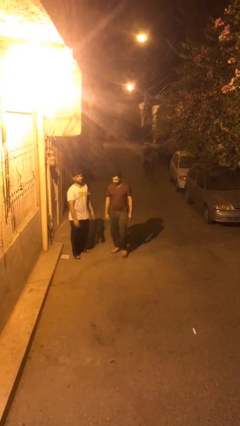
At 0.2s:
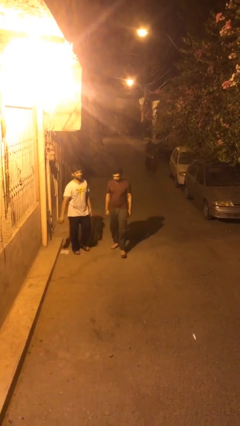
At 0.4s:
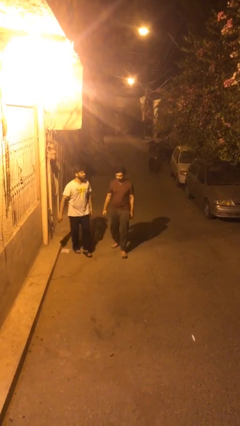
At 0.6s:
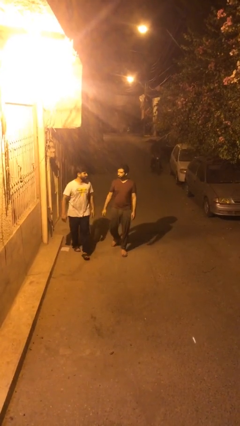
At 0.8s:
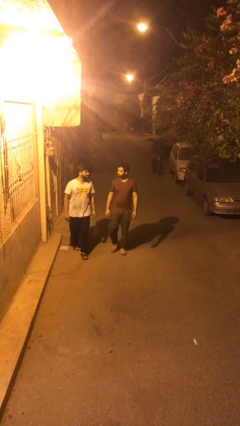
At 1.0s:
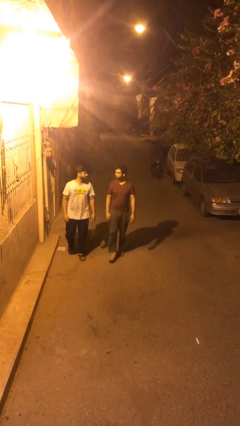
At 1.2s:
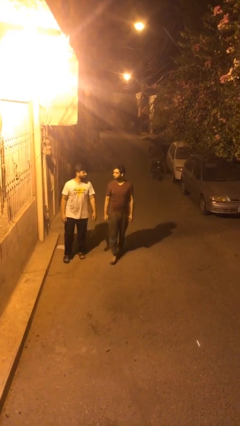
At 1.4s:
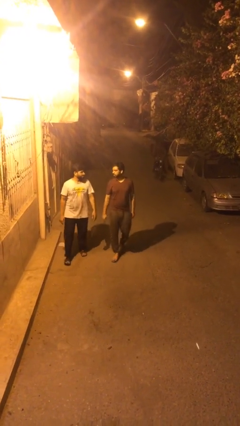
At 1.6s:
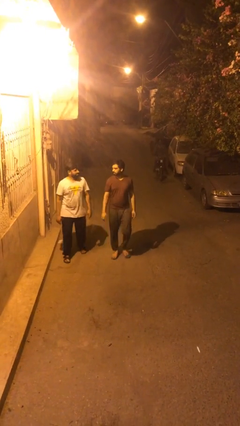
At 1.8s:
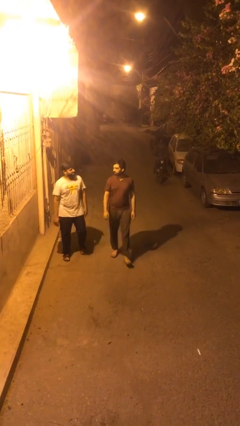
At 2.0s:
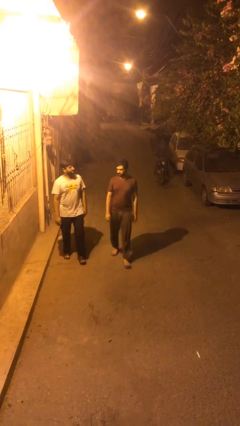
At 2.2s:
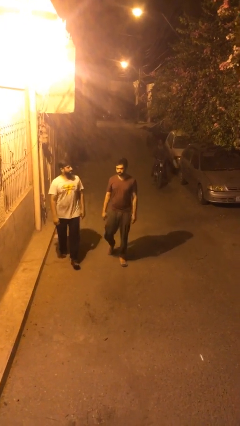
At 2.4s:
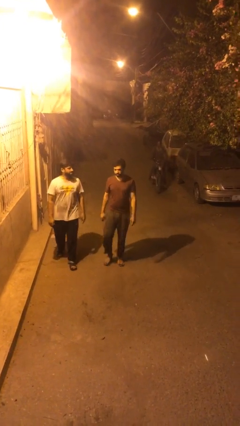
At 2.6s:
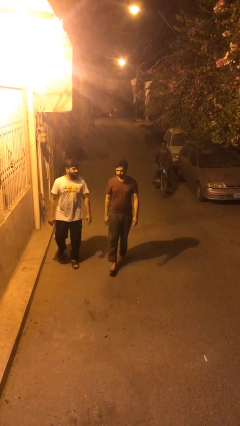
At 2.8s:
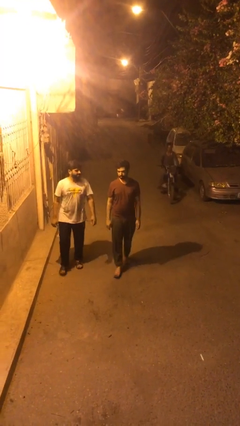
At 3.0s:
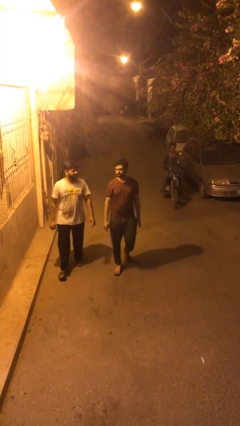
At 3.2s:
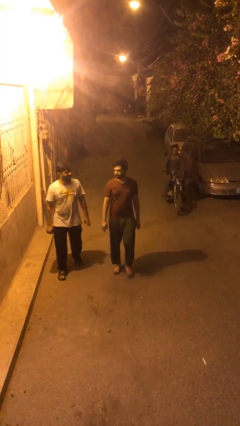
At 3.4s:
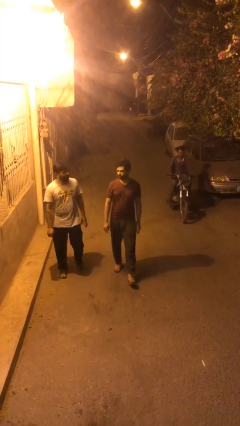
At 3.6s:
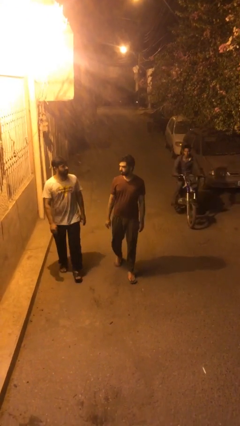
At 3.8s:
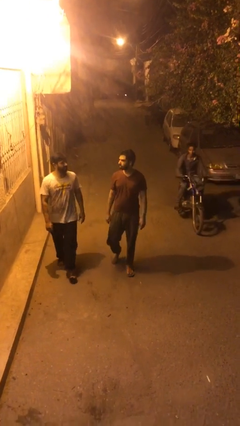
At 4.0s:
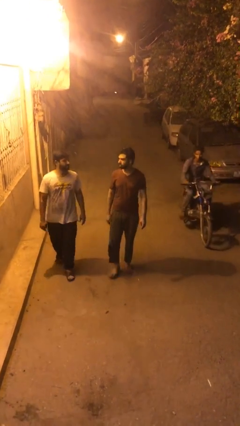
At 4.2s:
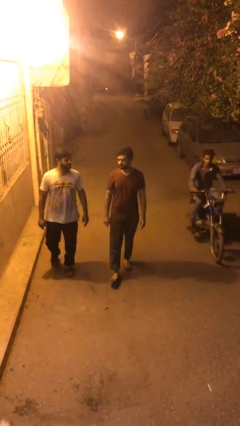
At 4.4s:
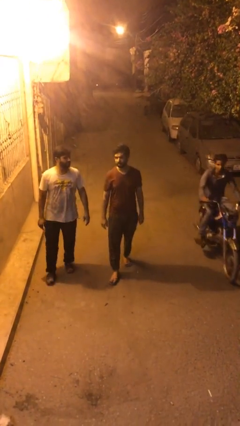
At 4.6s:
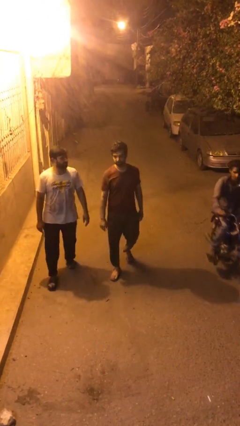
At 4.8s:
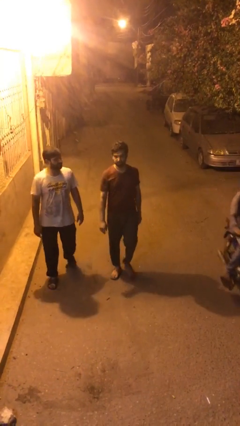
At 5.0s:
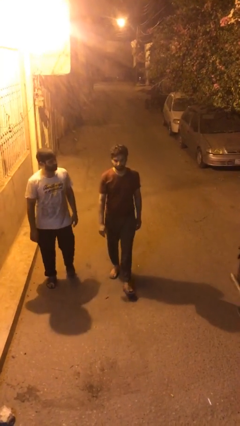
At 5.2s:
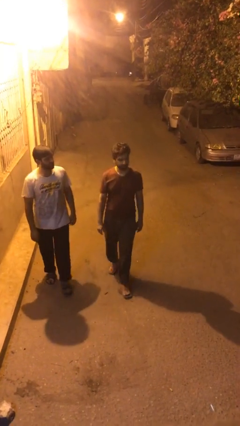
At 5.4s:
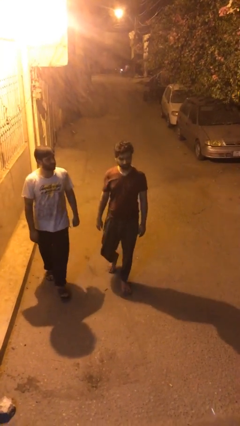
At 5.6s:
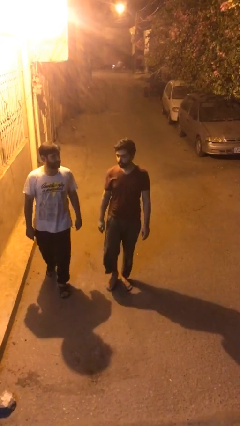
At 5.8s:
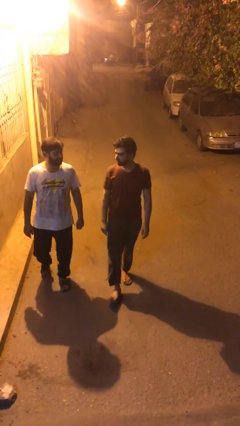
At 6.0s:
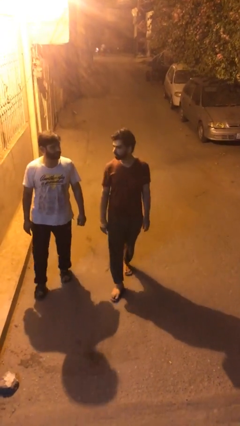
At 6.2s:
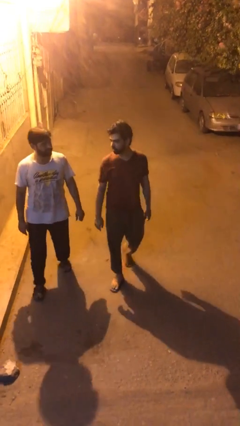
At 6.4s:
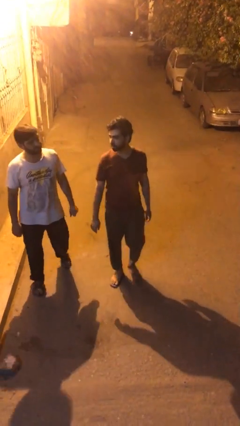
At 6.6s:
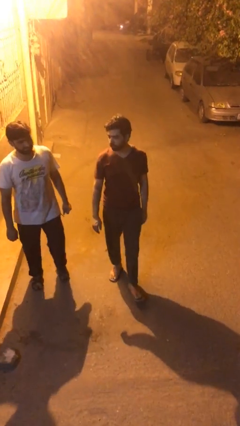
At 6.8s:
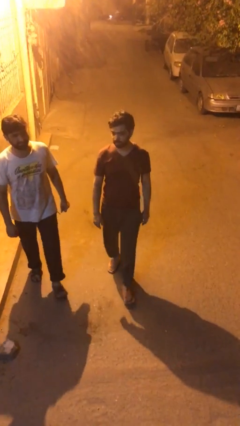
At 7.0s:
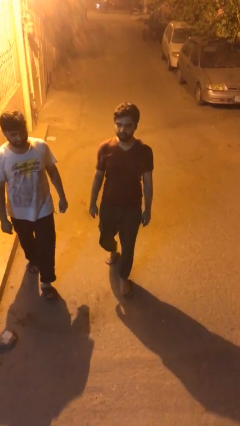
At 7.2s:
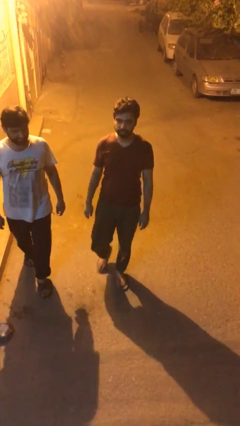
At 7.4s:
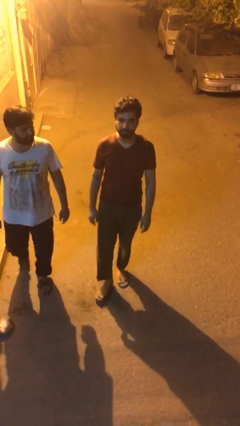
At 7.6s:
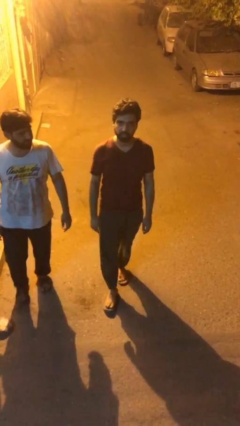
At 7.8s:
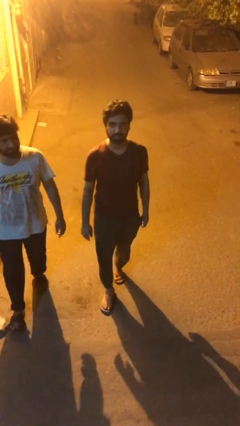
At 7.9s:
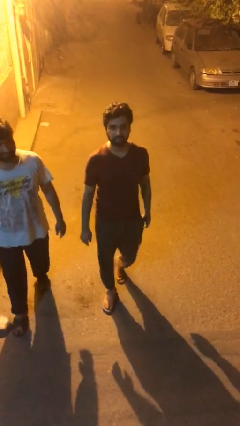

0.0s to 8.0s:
person talks to person

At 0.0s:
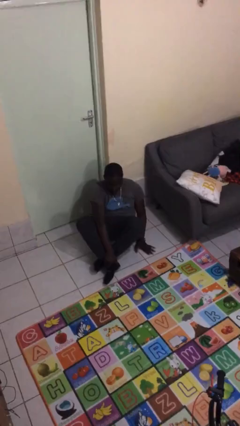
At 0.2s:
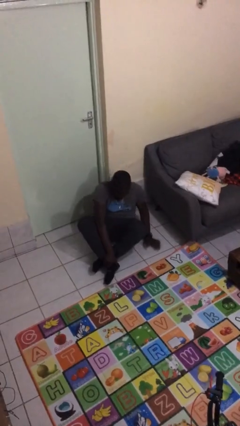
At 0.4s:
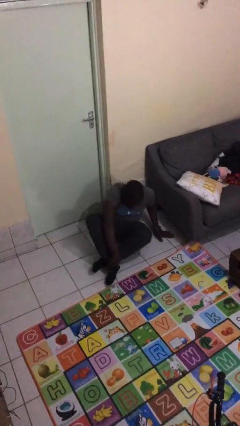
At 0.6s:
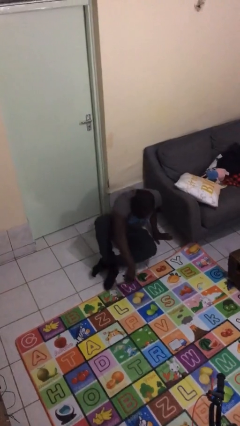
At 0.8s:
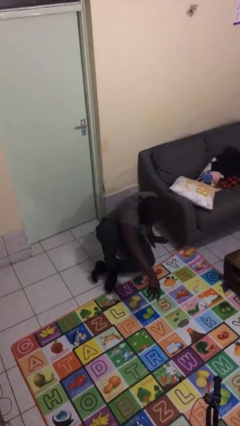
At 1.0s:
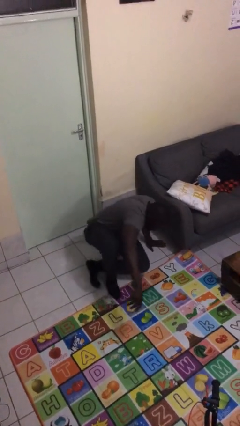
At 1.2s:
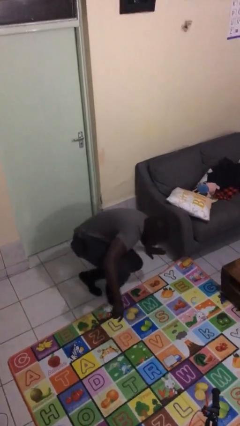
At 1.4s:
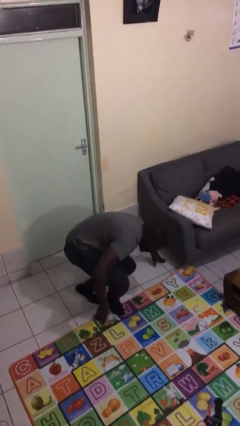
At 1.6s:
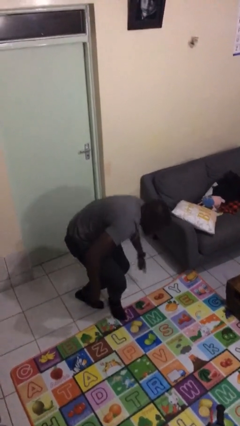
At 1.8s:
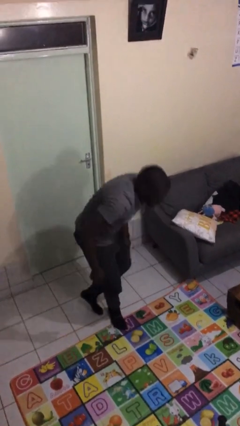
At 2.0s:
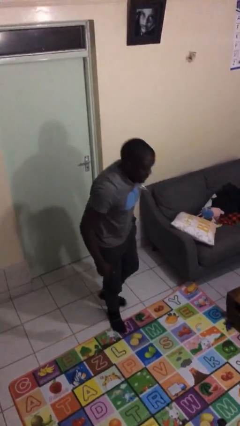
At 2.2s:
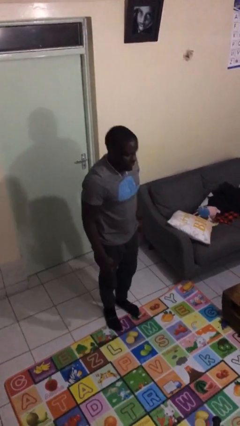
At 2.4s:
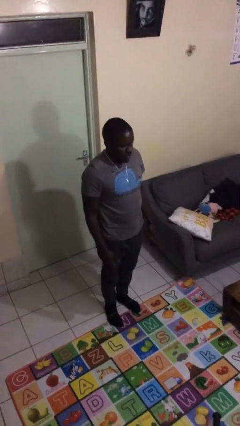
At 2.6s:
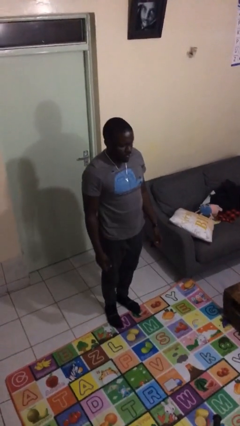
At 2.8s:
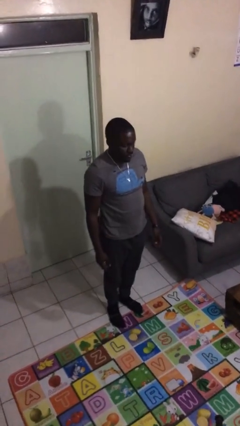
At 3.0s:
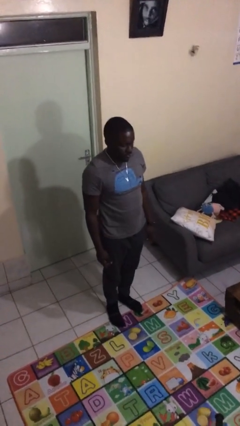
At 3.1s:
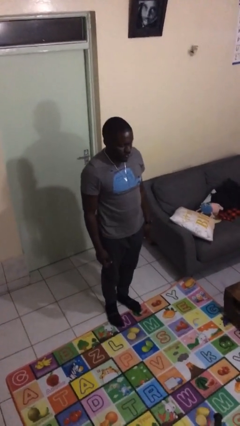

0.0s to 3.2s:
person stands up from floor

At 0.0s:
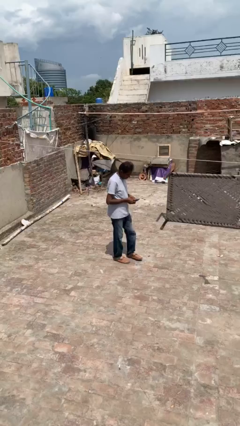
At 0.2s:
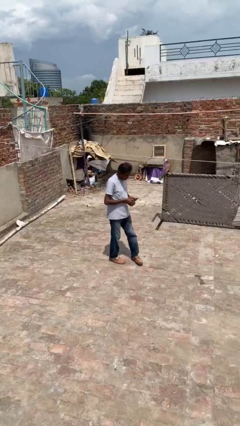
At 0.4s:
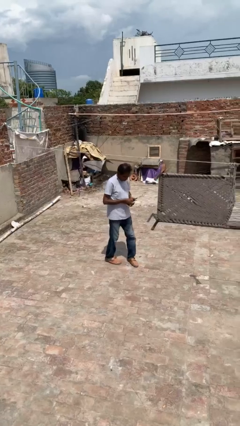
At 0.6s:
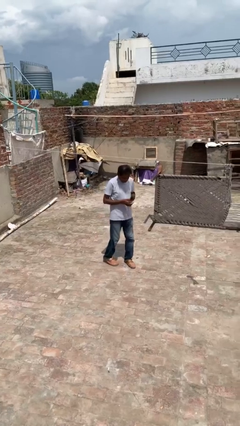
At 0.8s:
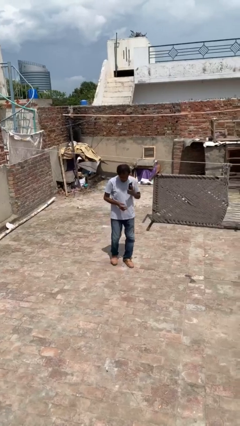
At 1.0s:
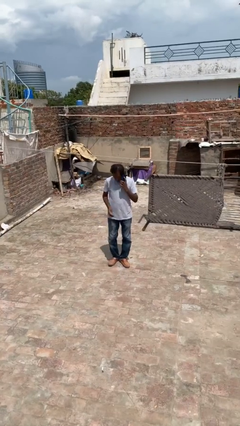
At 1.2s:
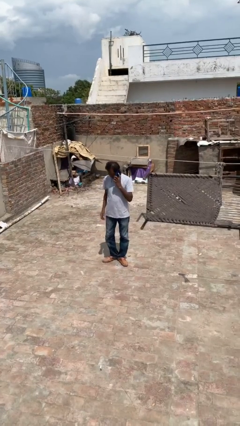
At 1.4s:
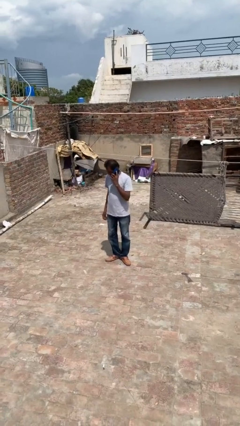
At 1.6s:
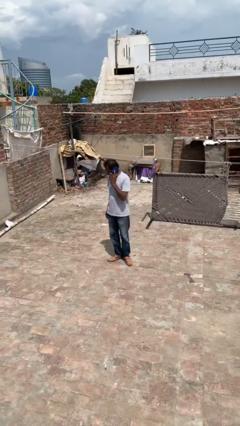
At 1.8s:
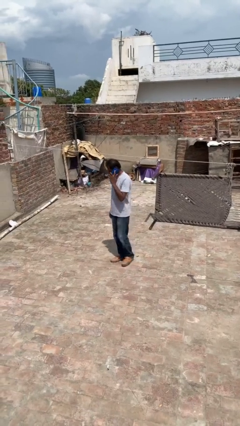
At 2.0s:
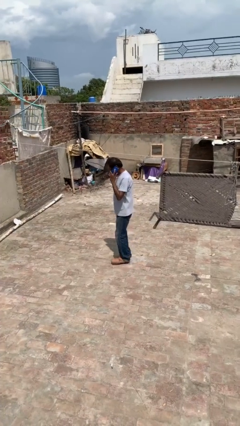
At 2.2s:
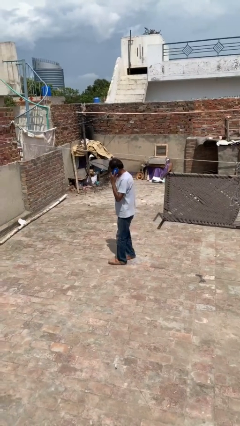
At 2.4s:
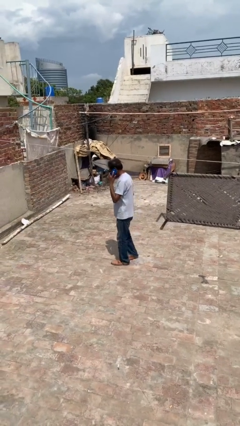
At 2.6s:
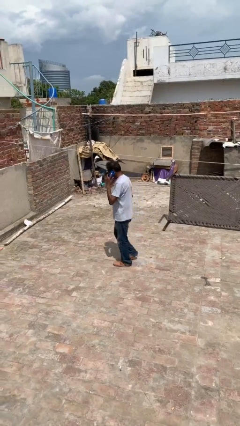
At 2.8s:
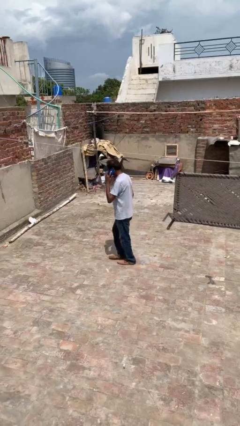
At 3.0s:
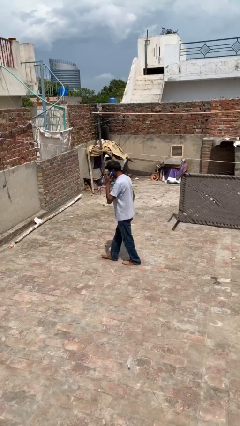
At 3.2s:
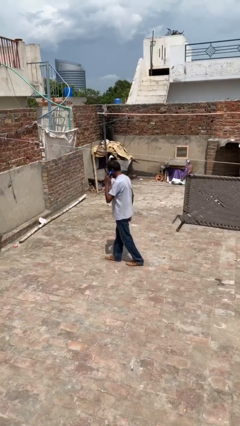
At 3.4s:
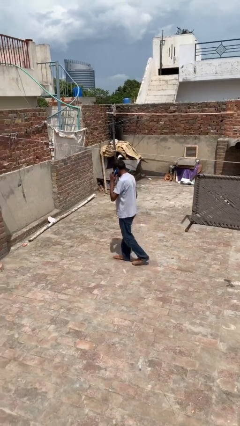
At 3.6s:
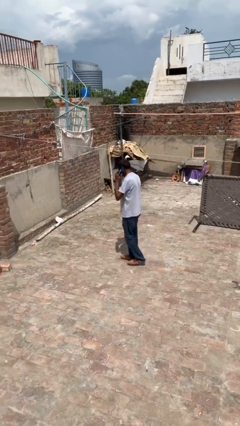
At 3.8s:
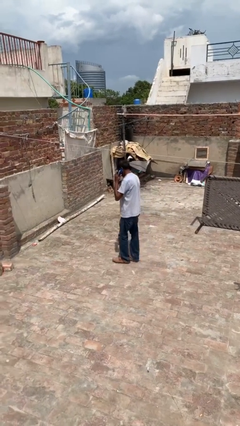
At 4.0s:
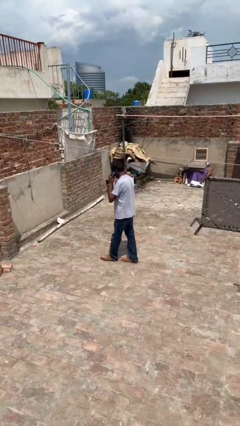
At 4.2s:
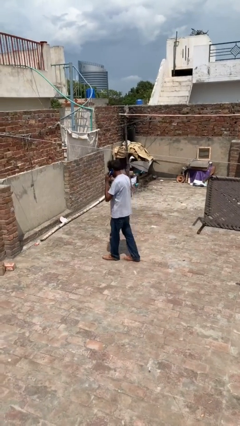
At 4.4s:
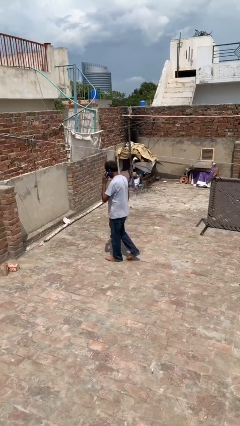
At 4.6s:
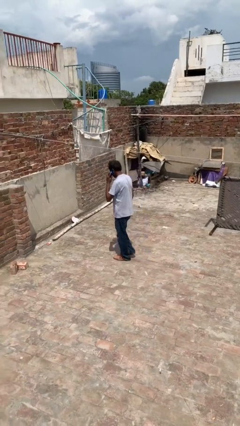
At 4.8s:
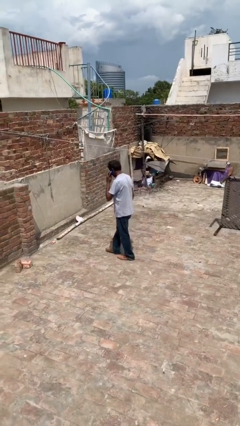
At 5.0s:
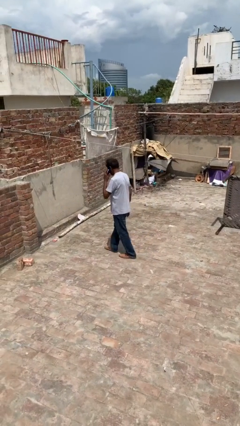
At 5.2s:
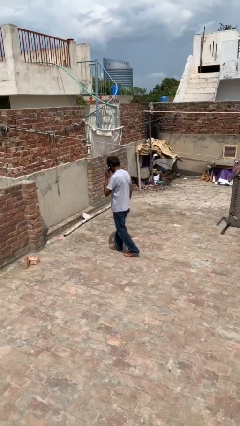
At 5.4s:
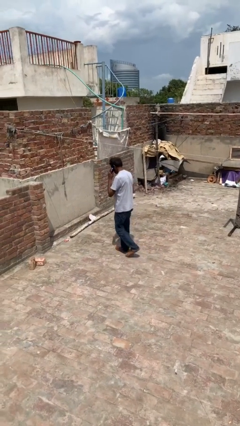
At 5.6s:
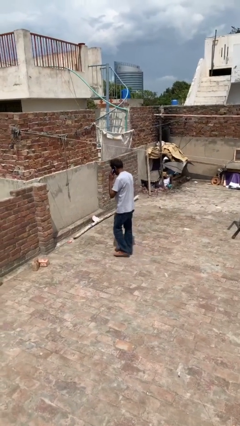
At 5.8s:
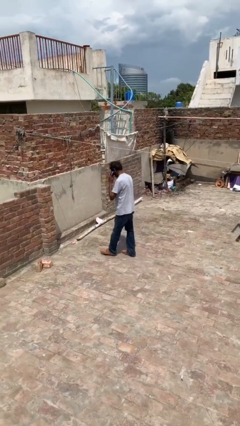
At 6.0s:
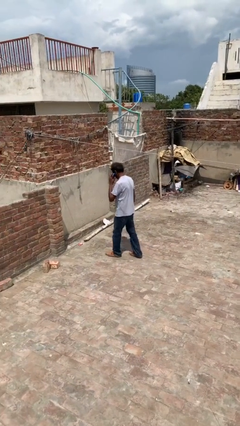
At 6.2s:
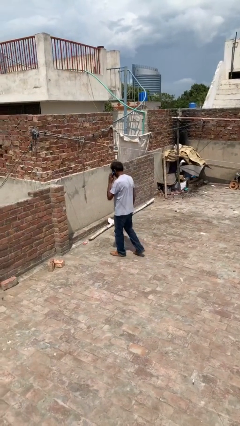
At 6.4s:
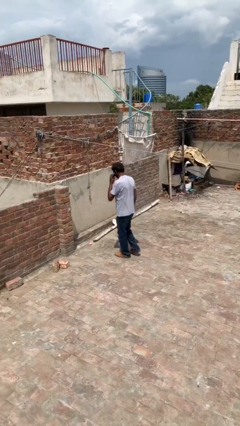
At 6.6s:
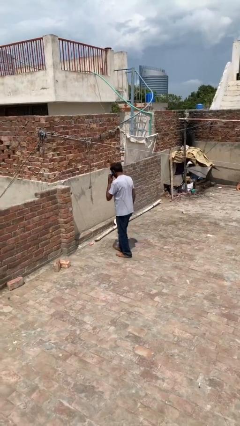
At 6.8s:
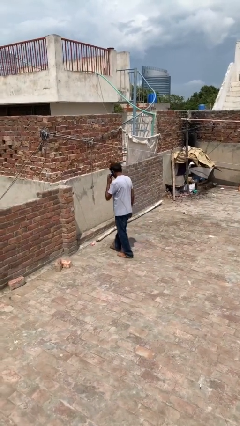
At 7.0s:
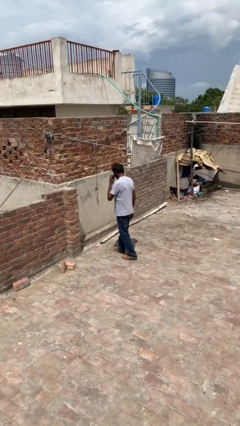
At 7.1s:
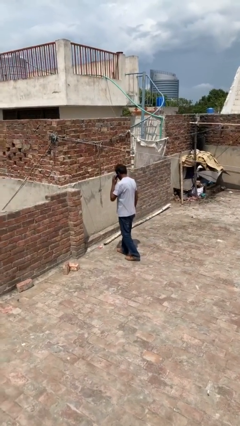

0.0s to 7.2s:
person talks on phone
